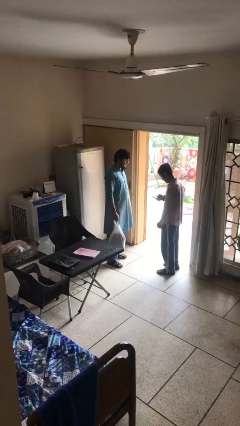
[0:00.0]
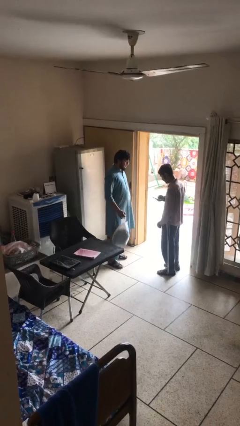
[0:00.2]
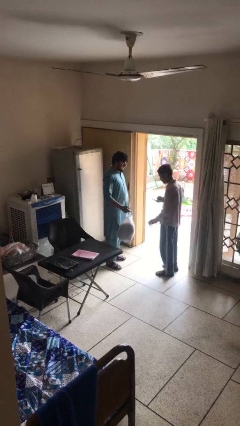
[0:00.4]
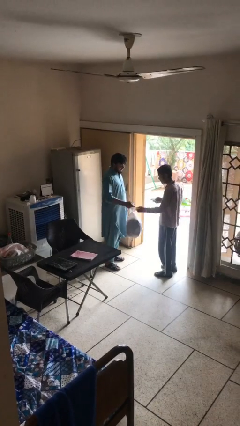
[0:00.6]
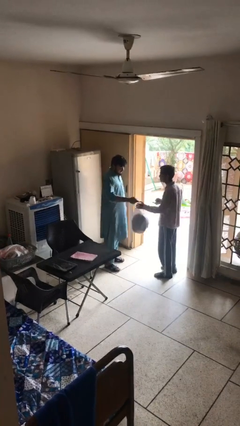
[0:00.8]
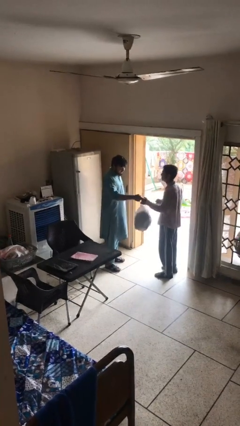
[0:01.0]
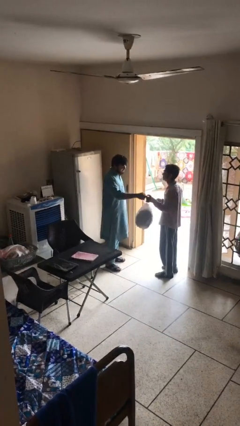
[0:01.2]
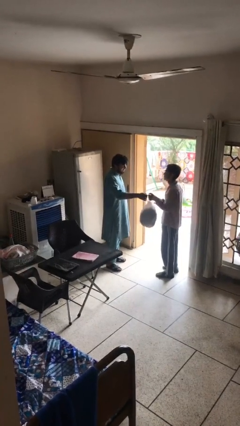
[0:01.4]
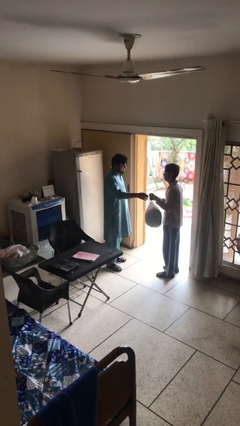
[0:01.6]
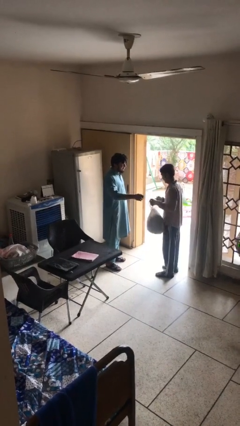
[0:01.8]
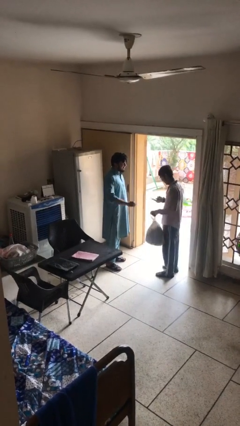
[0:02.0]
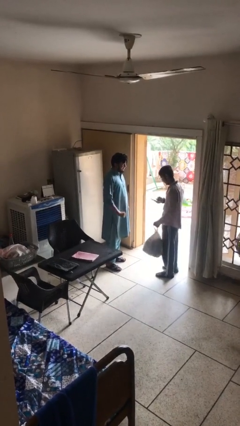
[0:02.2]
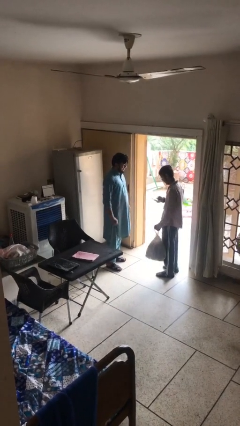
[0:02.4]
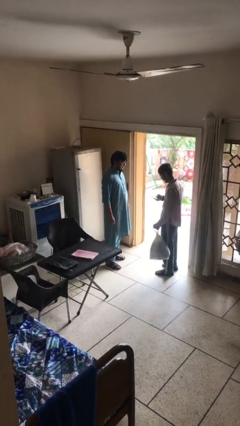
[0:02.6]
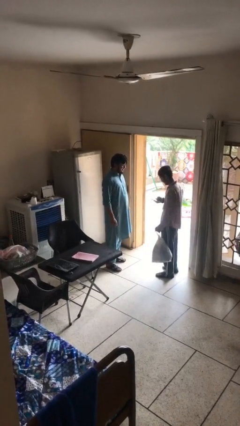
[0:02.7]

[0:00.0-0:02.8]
person transfers object to person

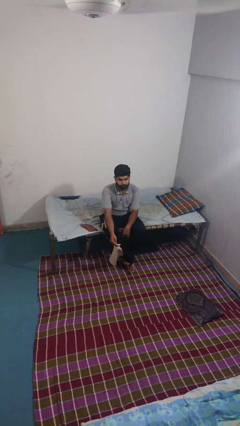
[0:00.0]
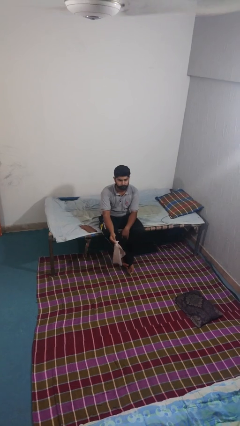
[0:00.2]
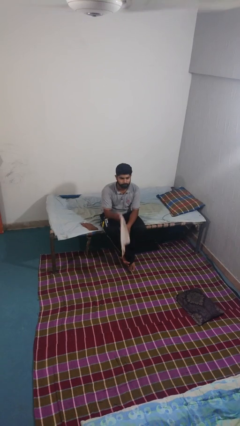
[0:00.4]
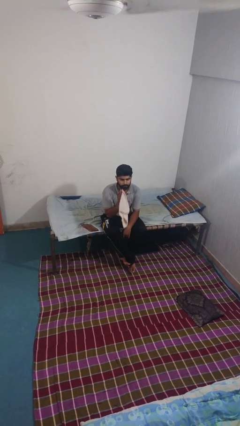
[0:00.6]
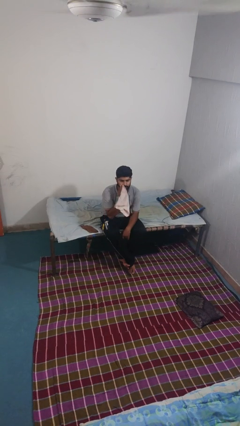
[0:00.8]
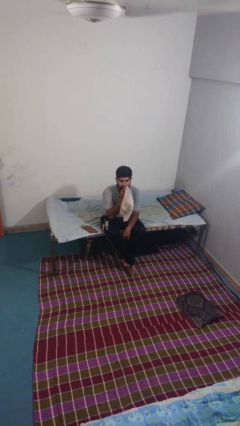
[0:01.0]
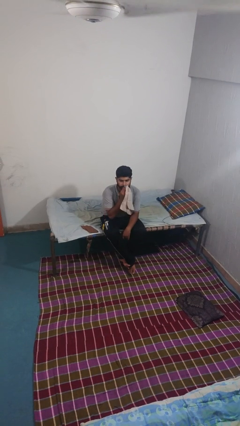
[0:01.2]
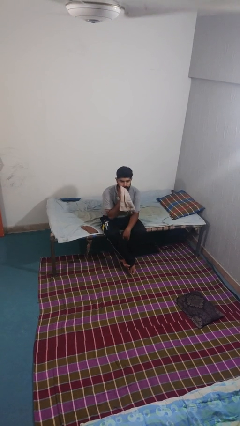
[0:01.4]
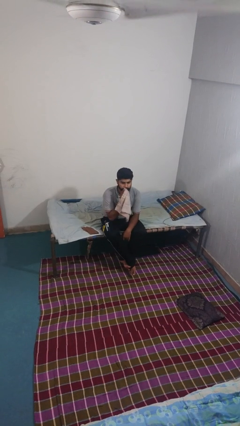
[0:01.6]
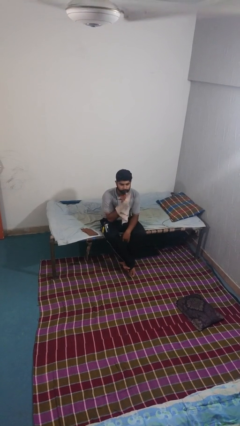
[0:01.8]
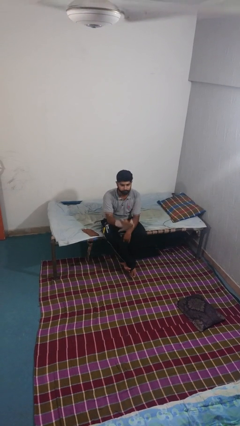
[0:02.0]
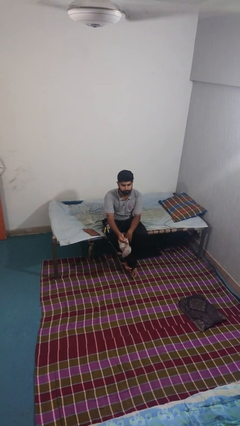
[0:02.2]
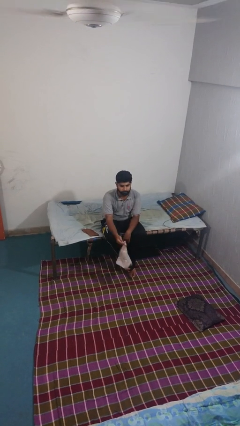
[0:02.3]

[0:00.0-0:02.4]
person wipes mouth with napkin

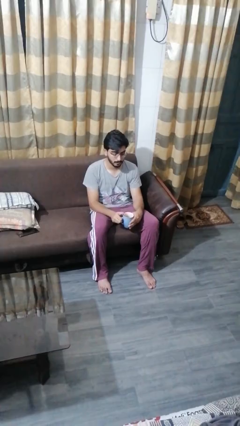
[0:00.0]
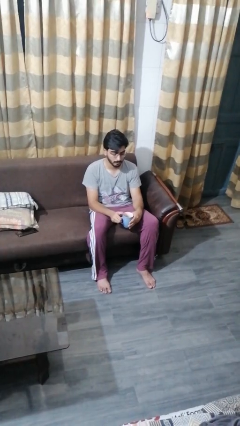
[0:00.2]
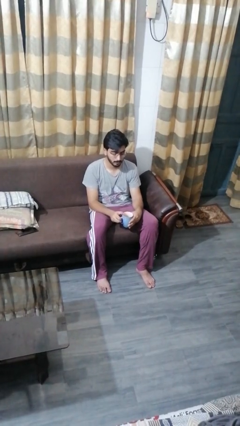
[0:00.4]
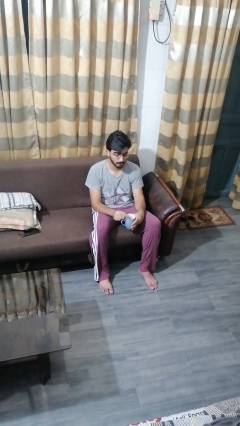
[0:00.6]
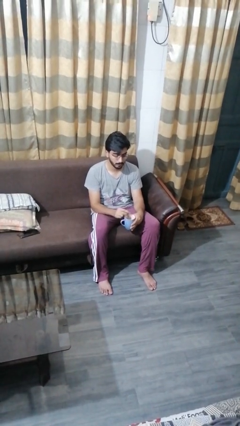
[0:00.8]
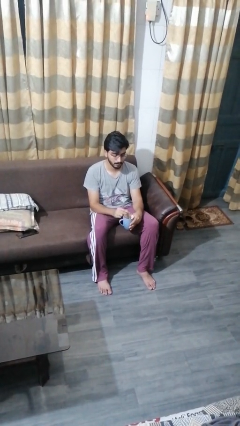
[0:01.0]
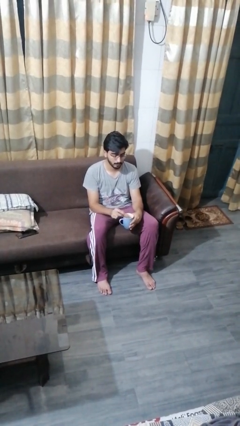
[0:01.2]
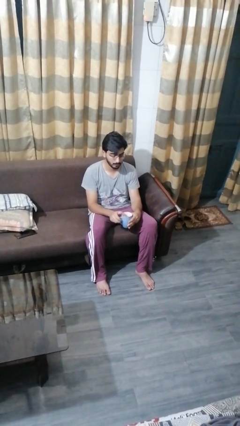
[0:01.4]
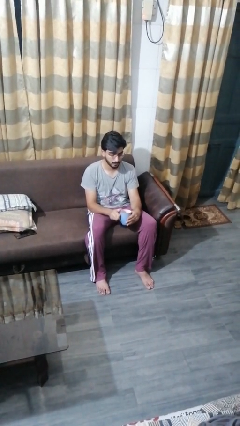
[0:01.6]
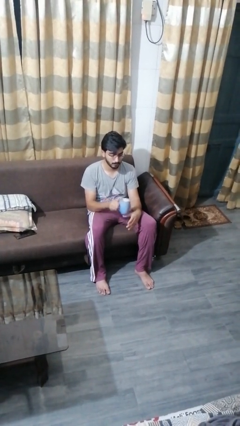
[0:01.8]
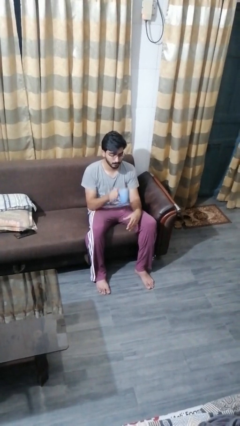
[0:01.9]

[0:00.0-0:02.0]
person stirs mug

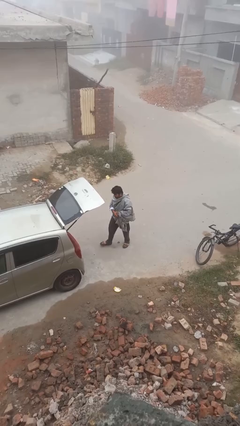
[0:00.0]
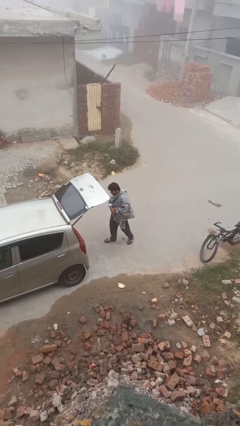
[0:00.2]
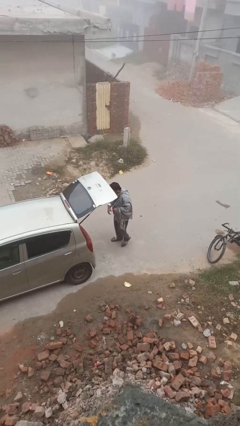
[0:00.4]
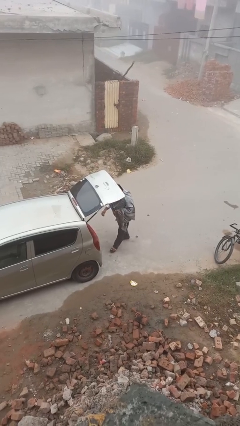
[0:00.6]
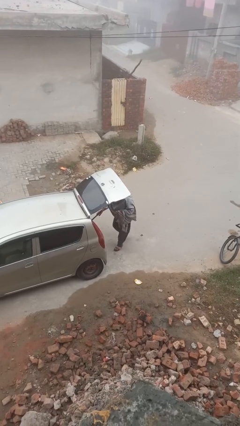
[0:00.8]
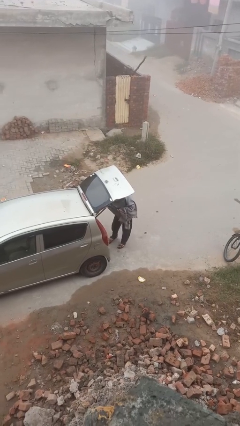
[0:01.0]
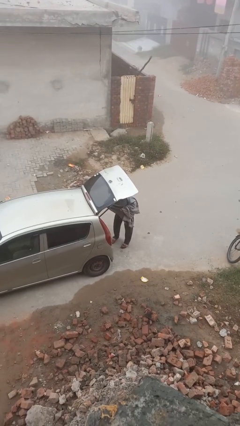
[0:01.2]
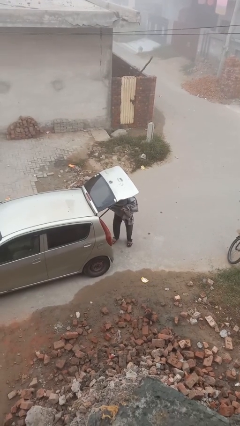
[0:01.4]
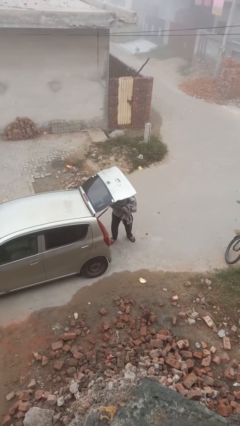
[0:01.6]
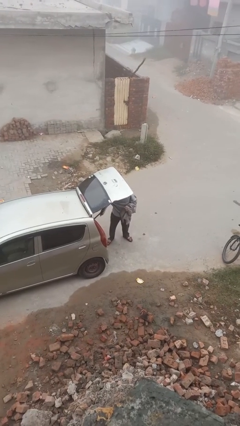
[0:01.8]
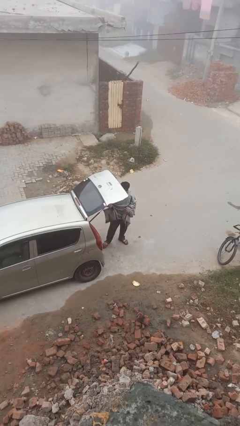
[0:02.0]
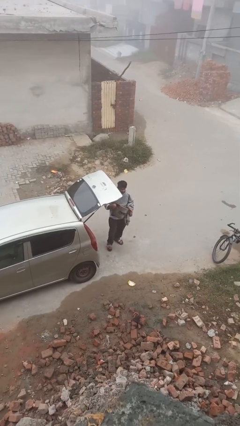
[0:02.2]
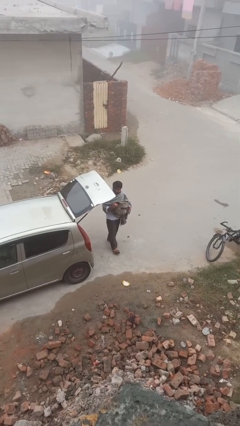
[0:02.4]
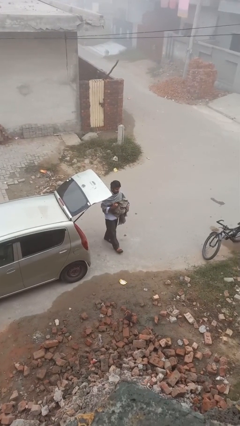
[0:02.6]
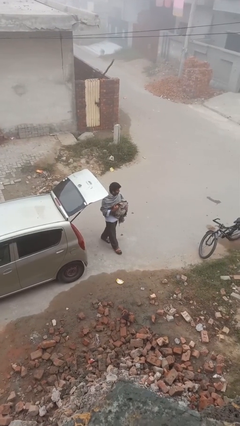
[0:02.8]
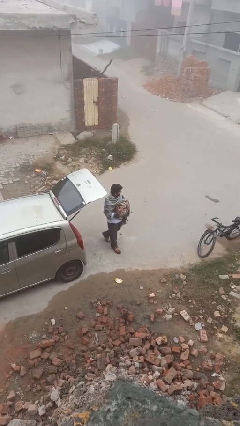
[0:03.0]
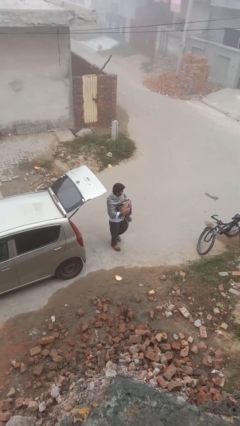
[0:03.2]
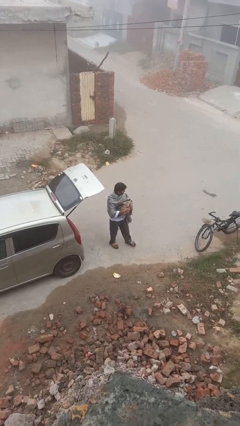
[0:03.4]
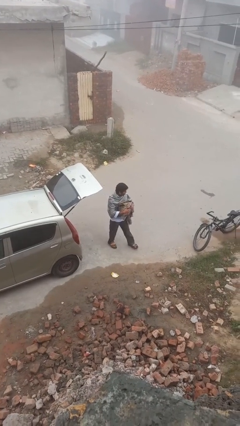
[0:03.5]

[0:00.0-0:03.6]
person unloads car

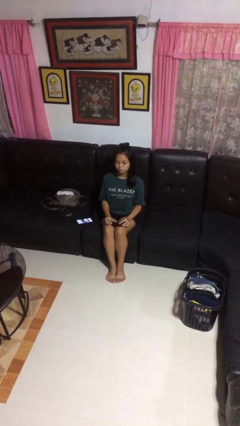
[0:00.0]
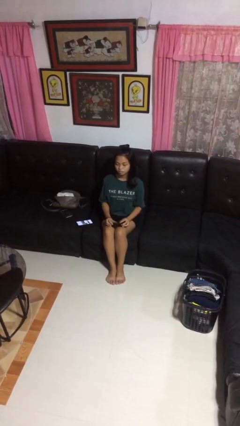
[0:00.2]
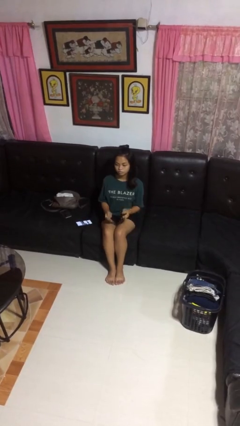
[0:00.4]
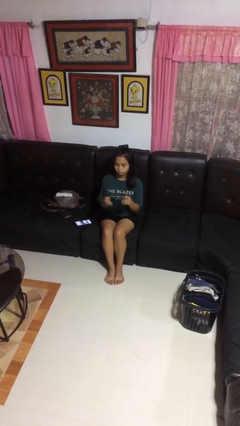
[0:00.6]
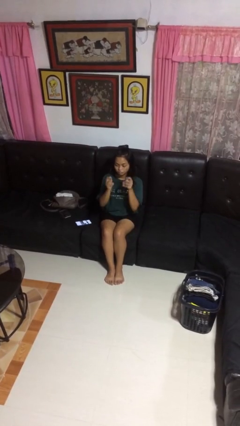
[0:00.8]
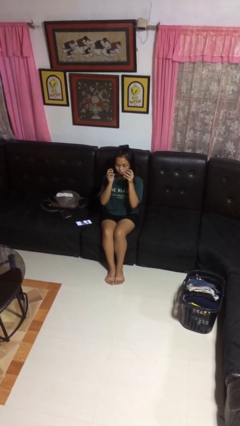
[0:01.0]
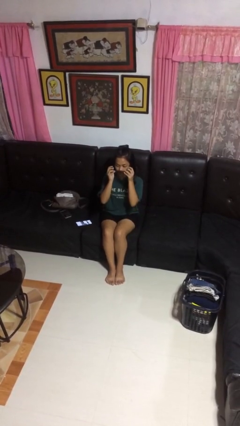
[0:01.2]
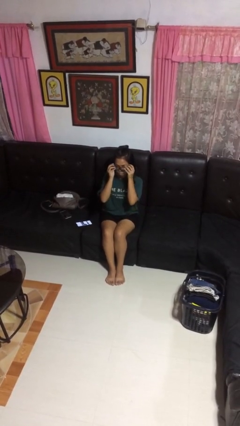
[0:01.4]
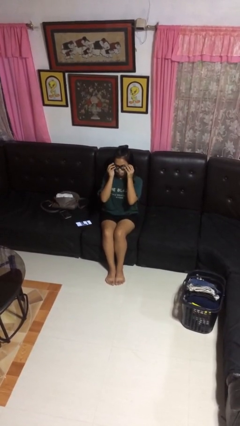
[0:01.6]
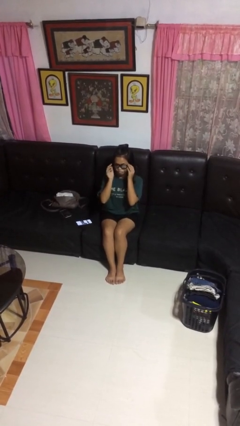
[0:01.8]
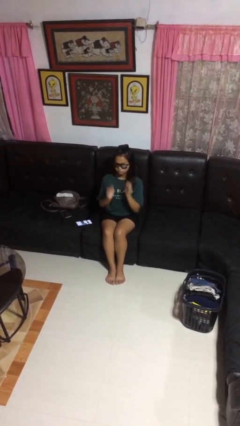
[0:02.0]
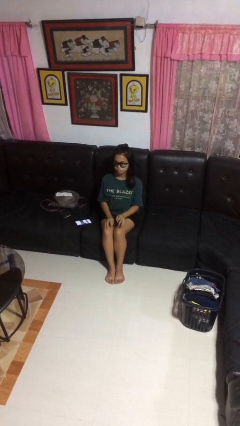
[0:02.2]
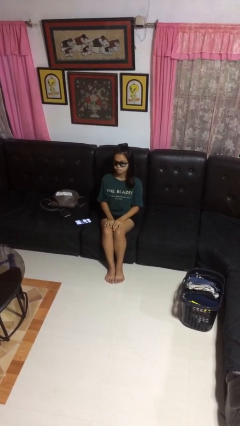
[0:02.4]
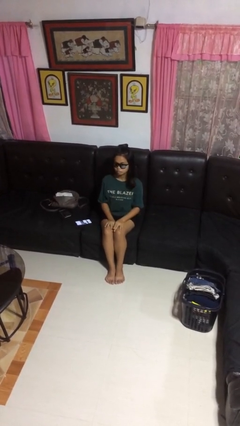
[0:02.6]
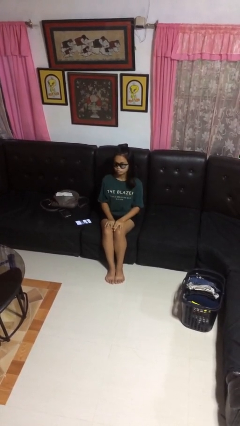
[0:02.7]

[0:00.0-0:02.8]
person puts on sunglasses

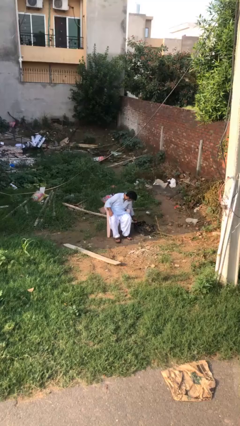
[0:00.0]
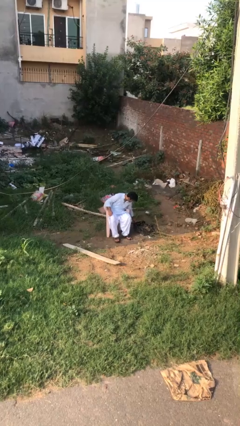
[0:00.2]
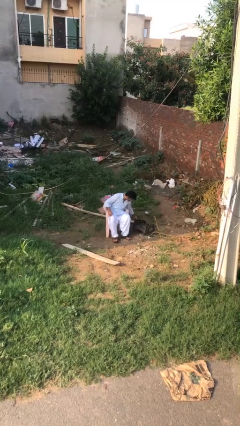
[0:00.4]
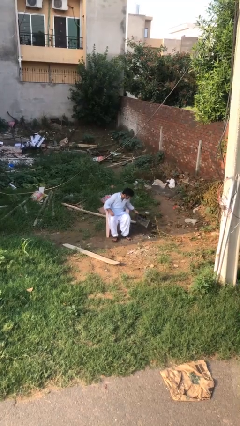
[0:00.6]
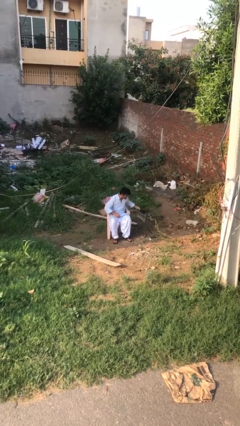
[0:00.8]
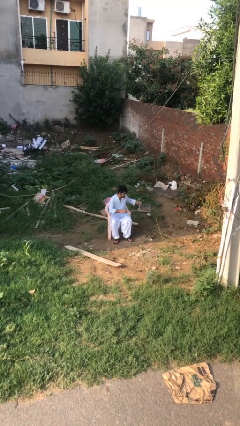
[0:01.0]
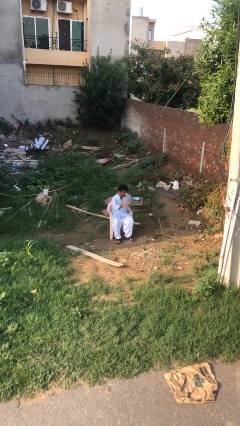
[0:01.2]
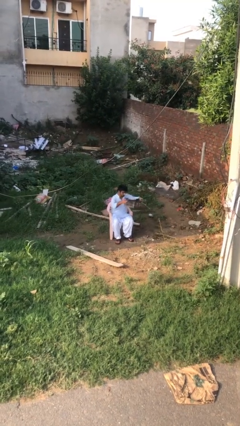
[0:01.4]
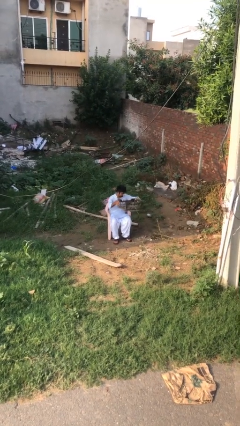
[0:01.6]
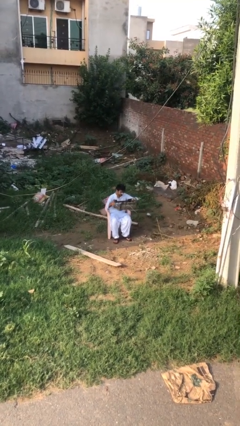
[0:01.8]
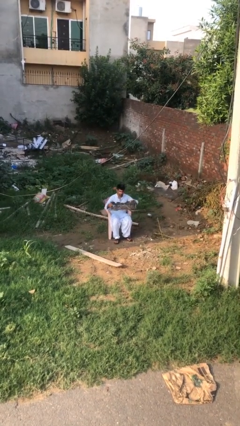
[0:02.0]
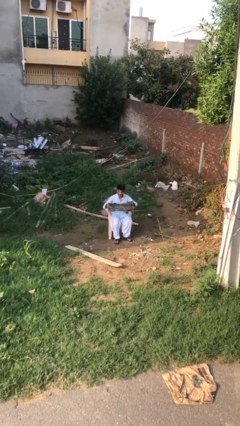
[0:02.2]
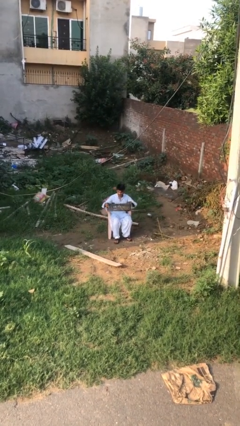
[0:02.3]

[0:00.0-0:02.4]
person picks up object from floor

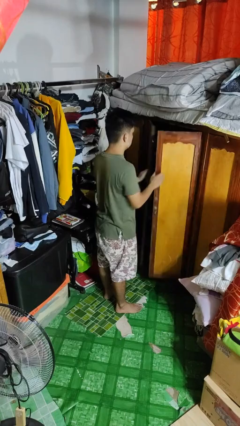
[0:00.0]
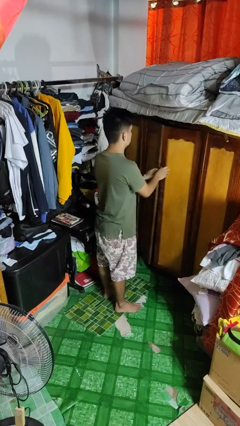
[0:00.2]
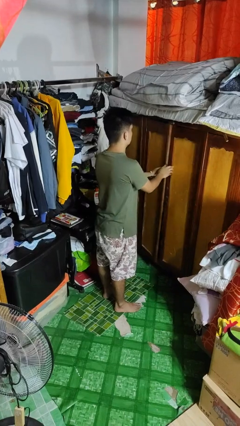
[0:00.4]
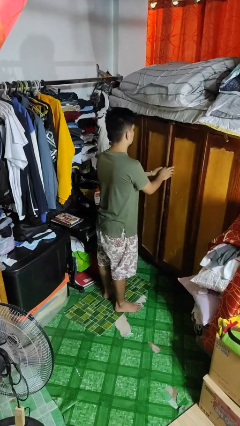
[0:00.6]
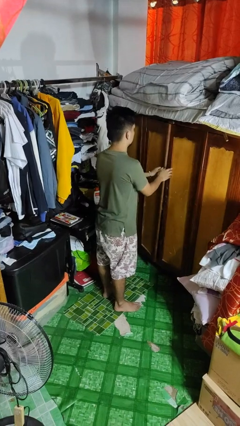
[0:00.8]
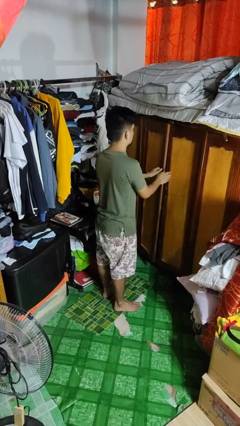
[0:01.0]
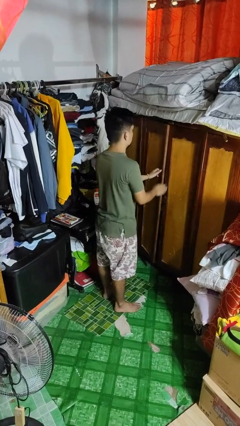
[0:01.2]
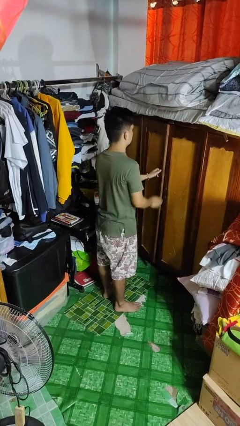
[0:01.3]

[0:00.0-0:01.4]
person closes closet door
